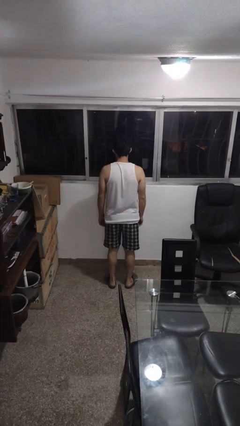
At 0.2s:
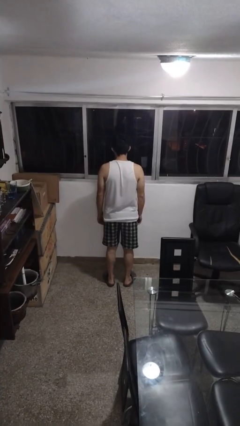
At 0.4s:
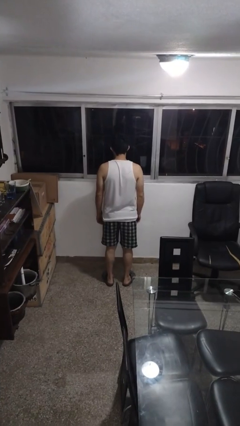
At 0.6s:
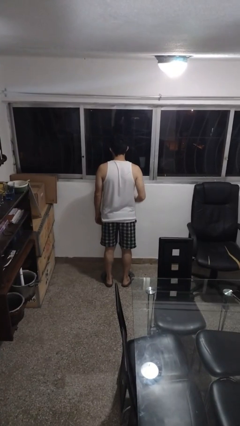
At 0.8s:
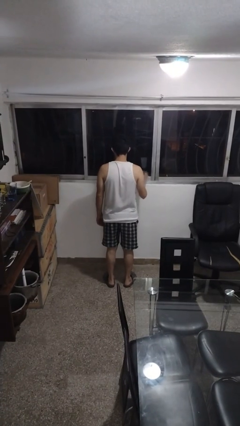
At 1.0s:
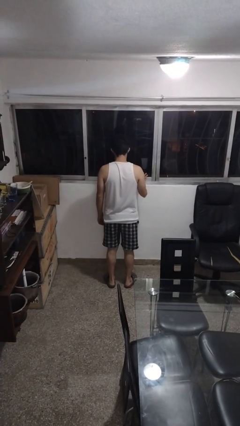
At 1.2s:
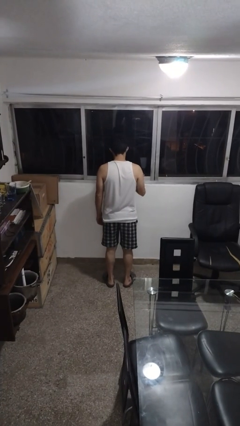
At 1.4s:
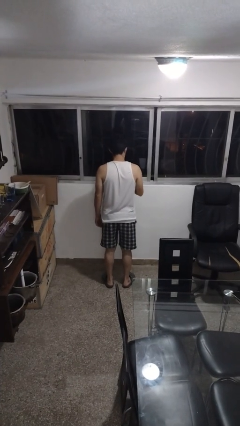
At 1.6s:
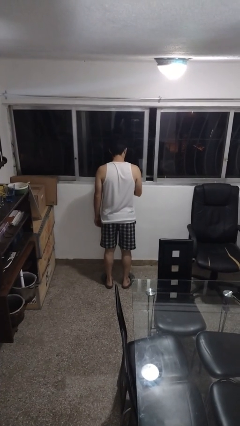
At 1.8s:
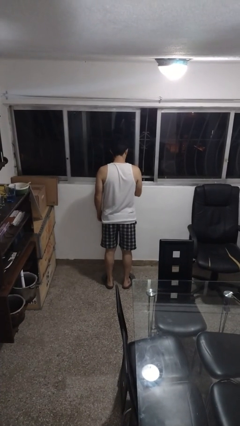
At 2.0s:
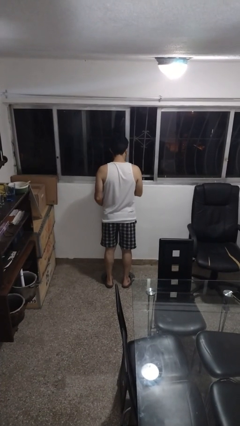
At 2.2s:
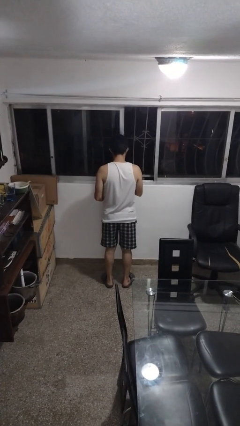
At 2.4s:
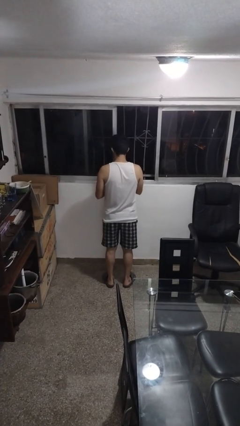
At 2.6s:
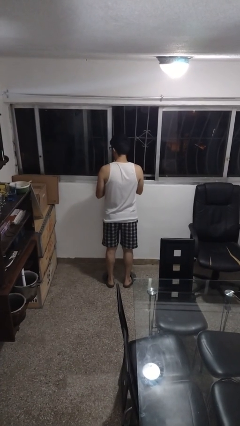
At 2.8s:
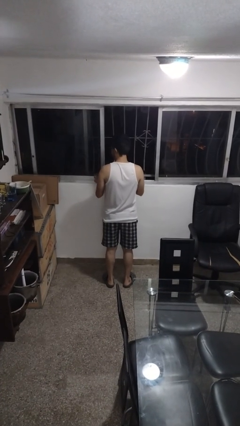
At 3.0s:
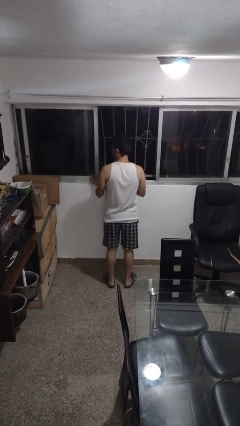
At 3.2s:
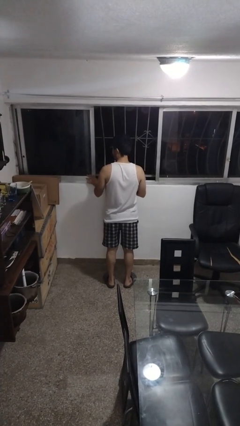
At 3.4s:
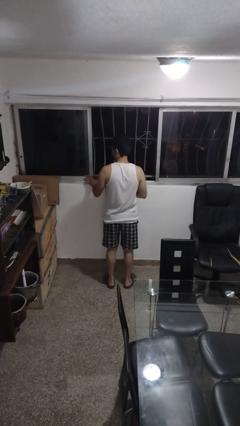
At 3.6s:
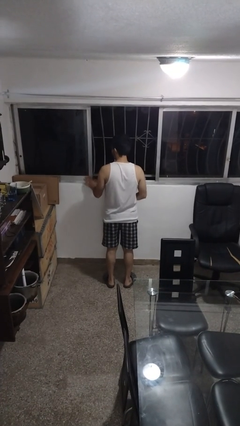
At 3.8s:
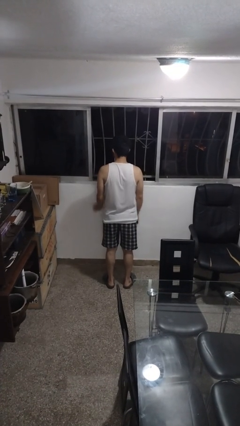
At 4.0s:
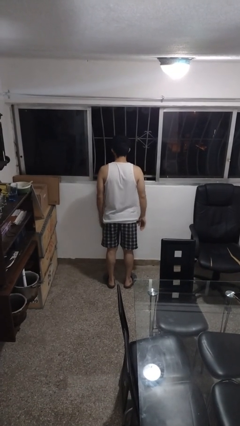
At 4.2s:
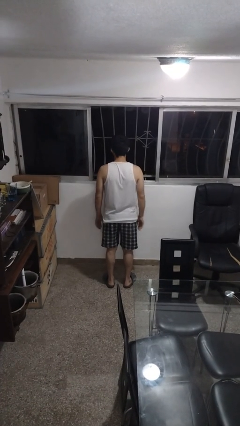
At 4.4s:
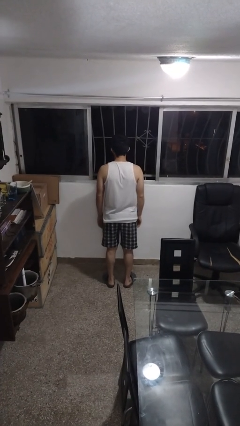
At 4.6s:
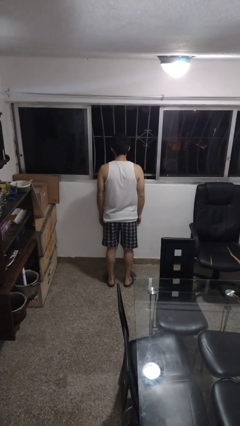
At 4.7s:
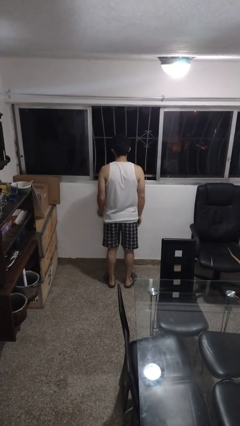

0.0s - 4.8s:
person opens home window

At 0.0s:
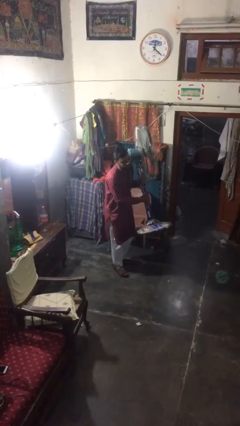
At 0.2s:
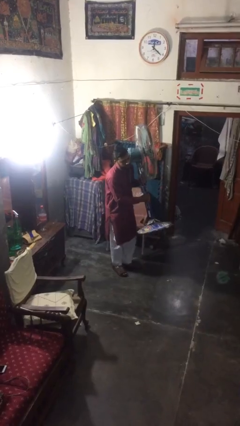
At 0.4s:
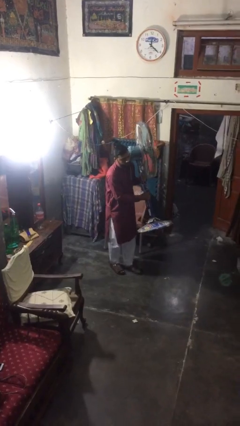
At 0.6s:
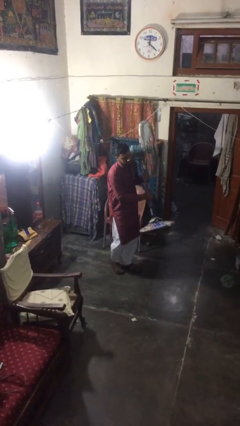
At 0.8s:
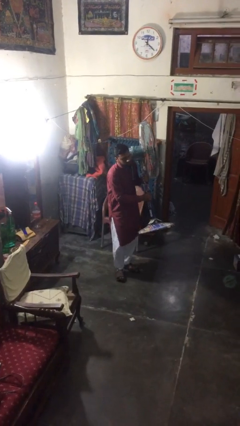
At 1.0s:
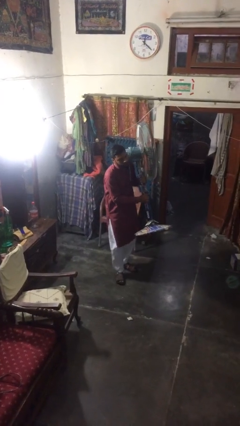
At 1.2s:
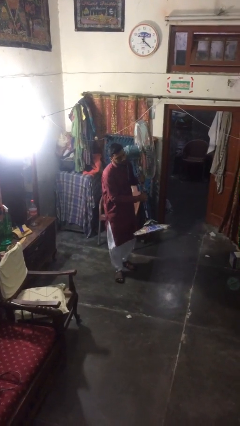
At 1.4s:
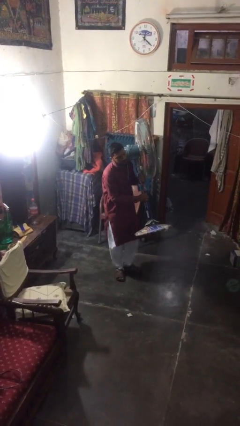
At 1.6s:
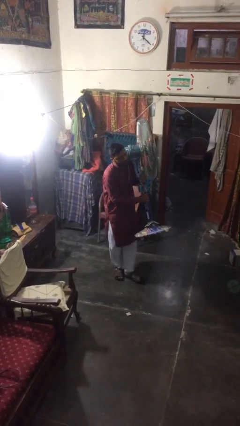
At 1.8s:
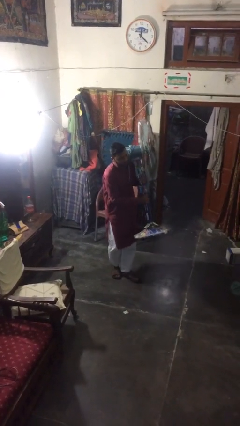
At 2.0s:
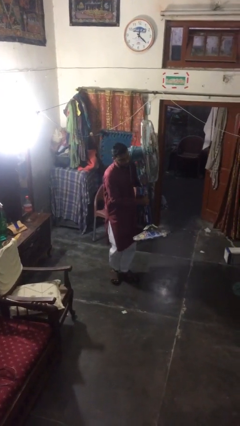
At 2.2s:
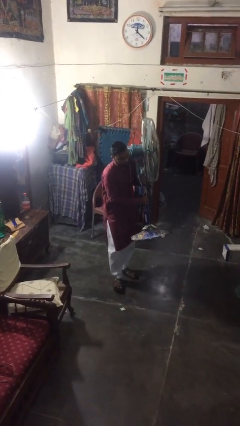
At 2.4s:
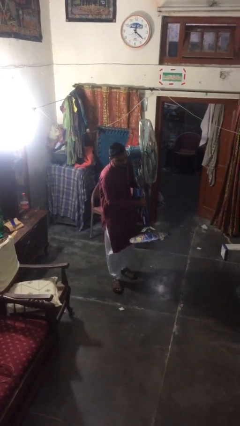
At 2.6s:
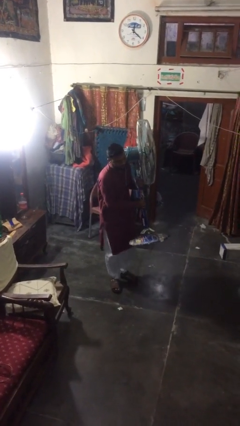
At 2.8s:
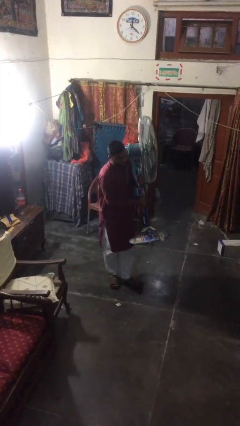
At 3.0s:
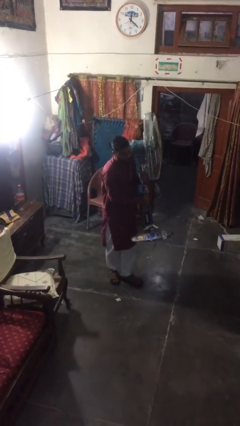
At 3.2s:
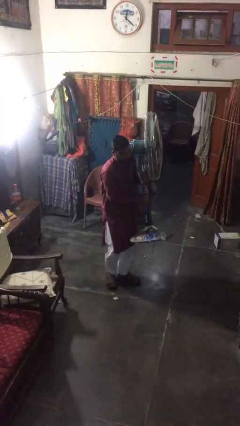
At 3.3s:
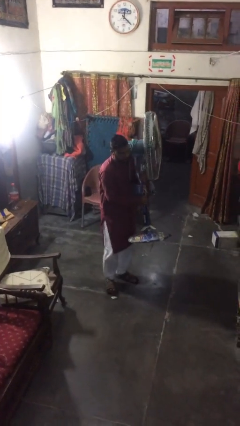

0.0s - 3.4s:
person carries heavy object

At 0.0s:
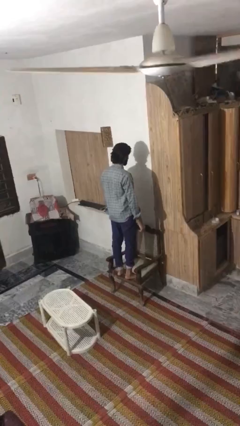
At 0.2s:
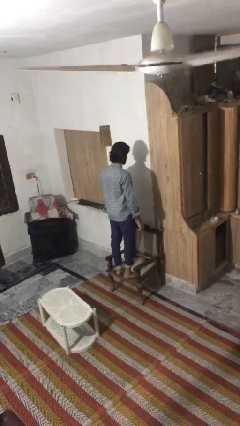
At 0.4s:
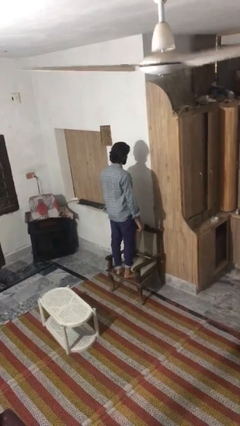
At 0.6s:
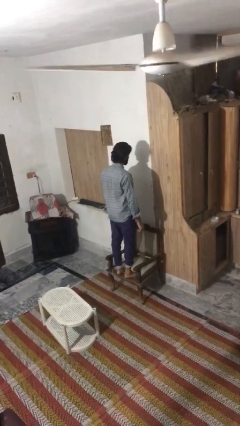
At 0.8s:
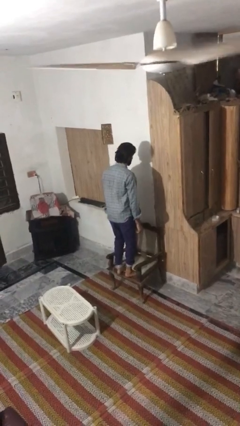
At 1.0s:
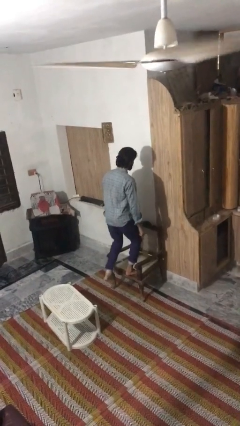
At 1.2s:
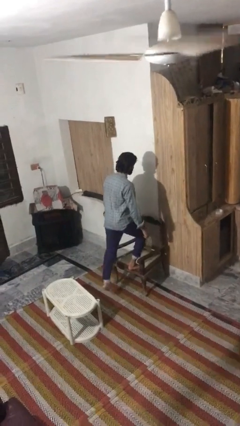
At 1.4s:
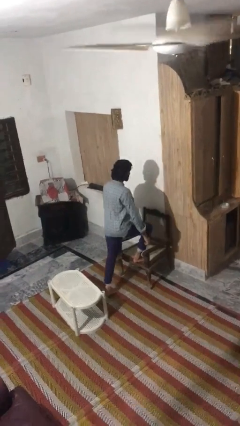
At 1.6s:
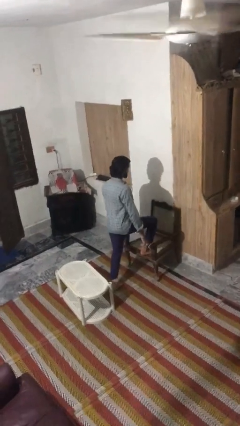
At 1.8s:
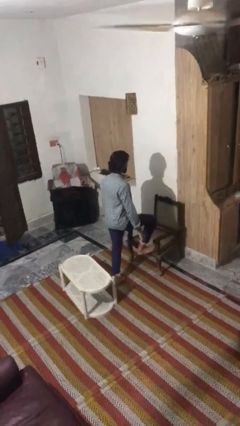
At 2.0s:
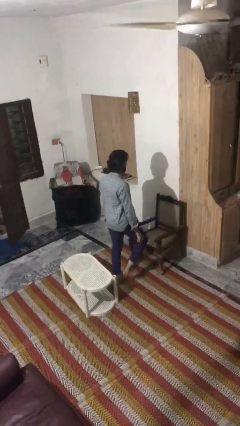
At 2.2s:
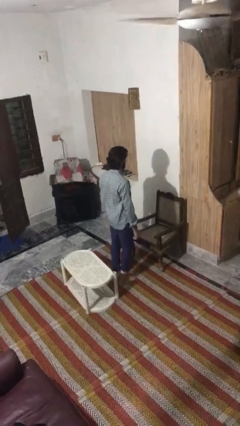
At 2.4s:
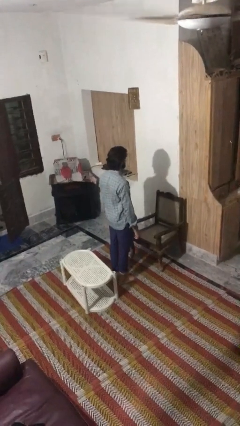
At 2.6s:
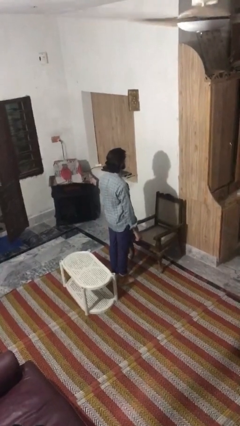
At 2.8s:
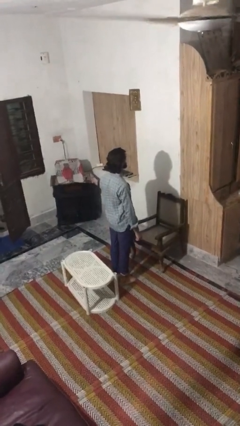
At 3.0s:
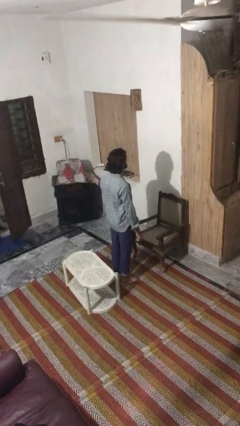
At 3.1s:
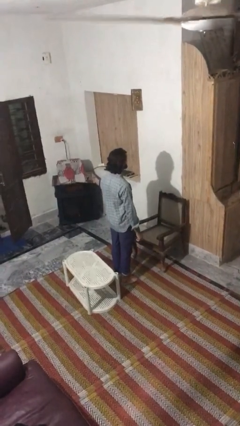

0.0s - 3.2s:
person climbs off chair

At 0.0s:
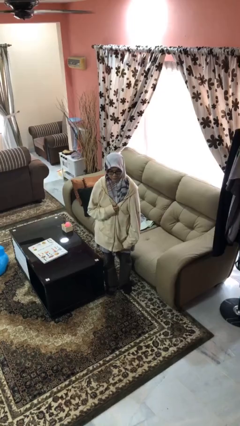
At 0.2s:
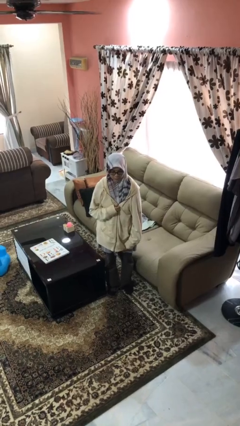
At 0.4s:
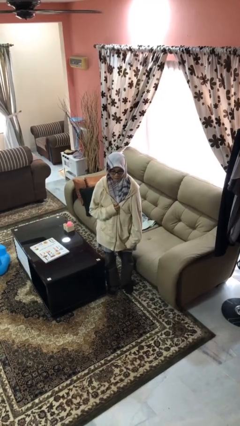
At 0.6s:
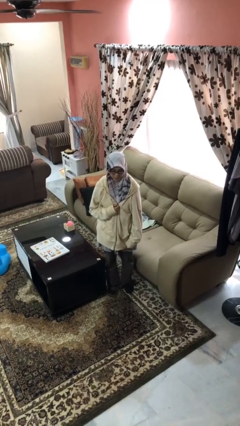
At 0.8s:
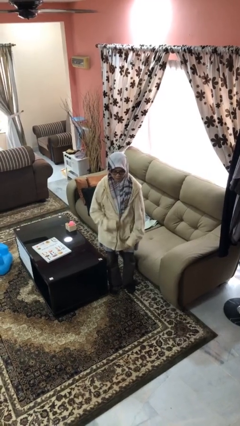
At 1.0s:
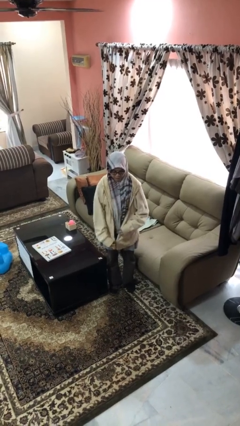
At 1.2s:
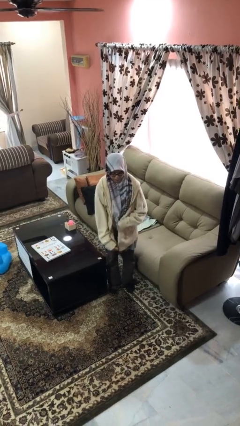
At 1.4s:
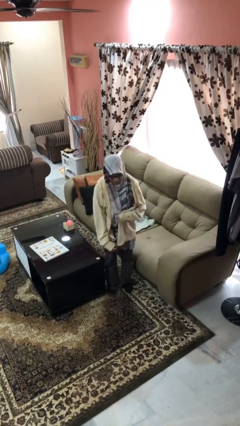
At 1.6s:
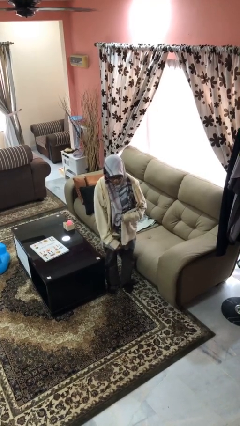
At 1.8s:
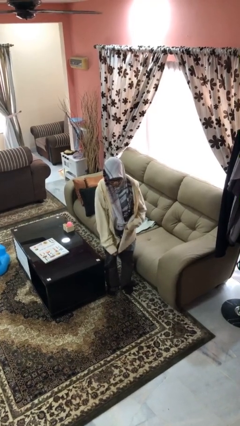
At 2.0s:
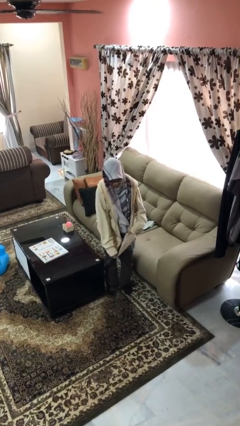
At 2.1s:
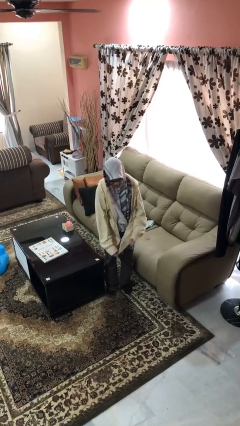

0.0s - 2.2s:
person unzips jacket

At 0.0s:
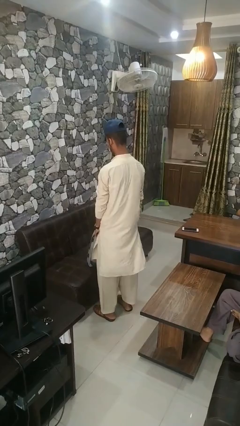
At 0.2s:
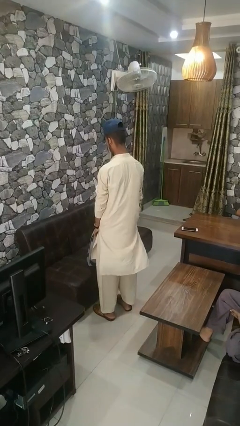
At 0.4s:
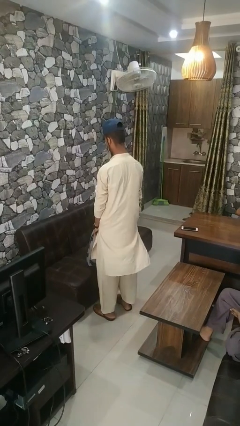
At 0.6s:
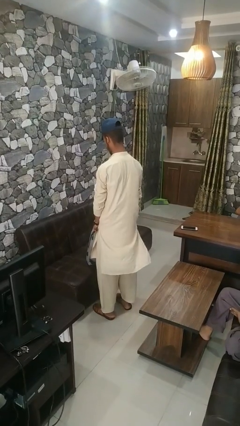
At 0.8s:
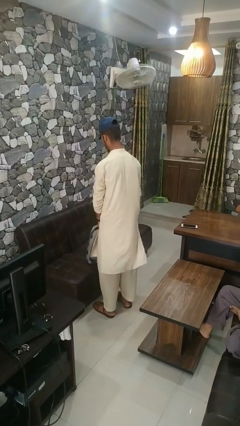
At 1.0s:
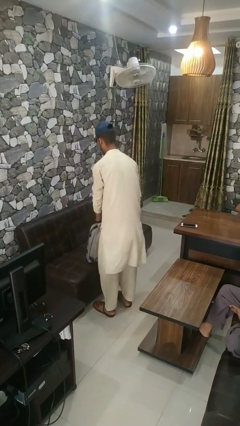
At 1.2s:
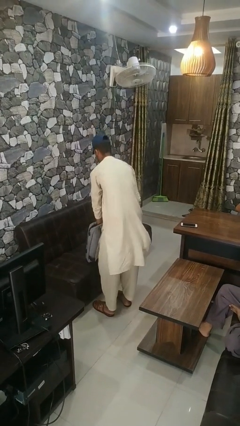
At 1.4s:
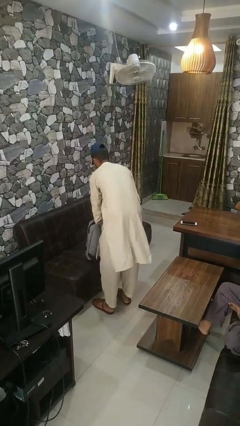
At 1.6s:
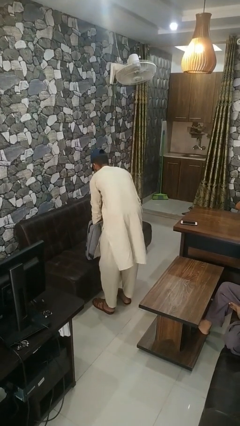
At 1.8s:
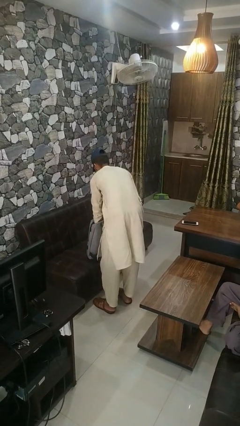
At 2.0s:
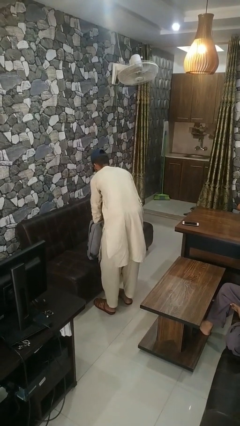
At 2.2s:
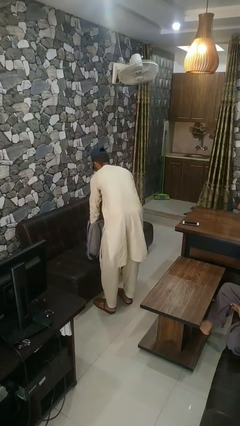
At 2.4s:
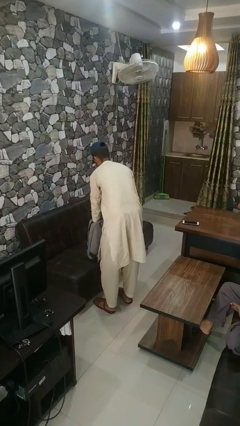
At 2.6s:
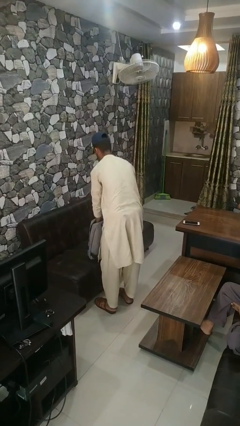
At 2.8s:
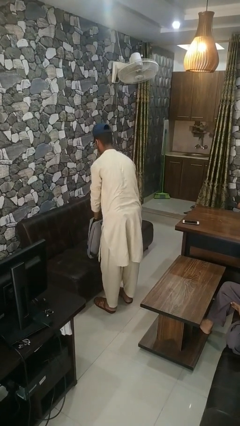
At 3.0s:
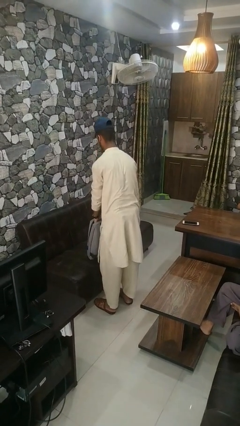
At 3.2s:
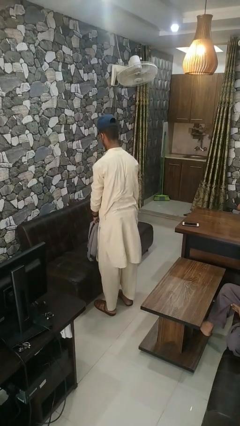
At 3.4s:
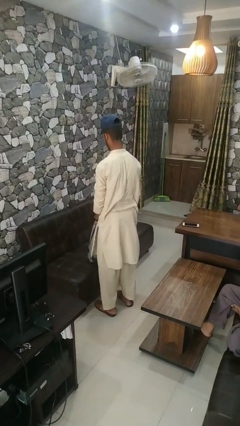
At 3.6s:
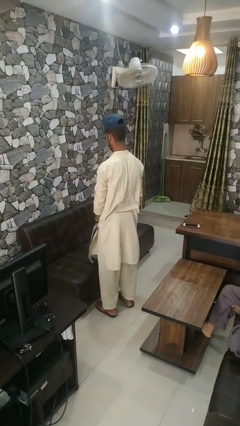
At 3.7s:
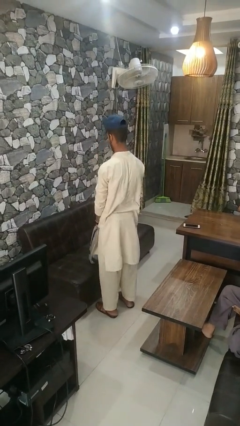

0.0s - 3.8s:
person searches in bag

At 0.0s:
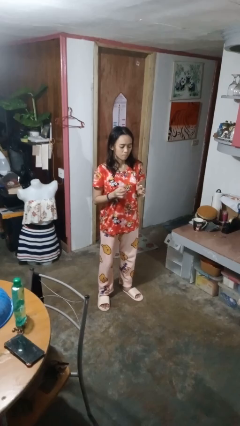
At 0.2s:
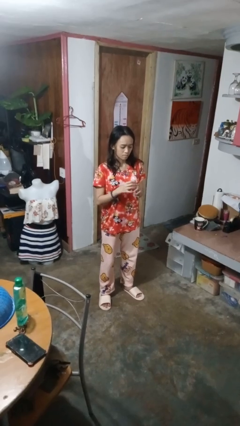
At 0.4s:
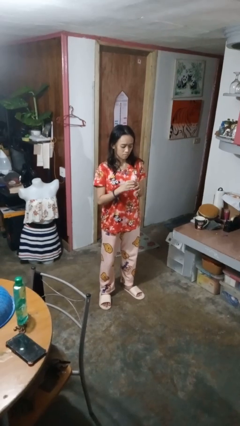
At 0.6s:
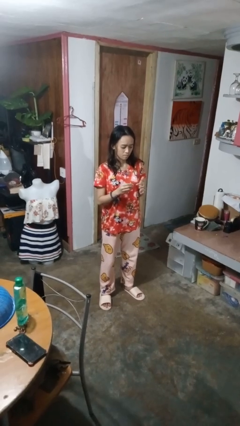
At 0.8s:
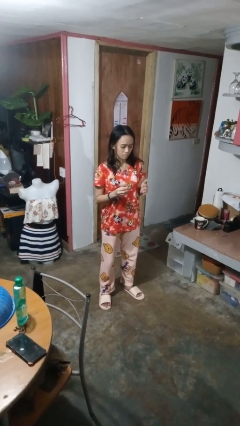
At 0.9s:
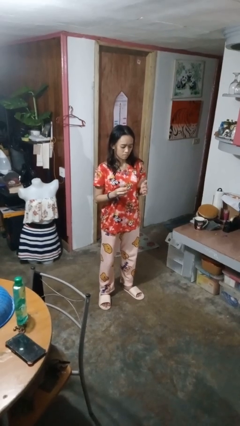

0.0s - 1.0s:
person takes off ring
